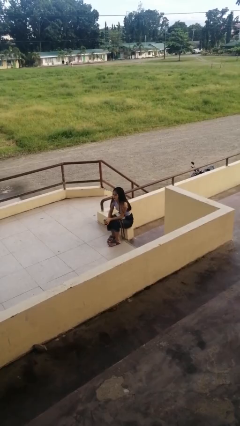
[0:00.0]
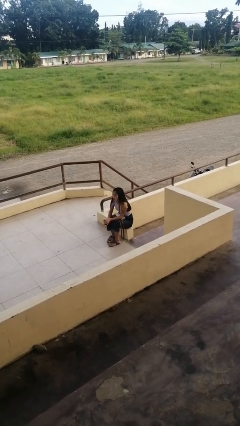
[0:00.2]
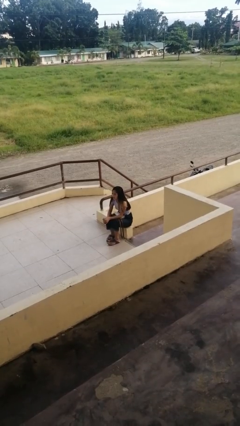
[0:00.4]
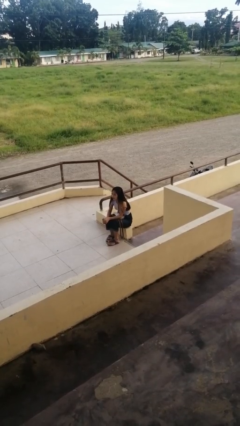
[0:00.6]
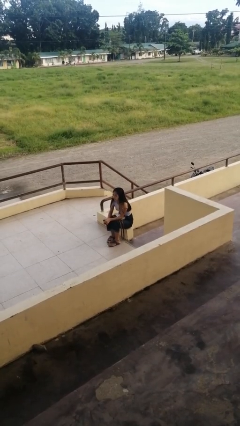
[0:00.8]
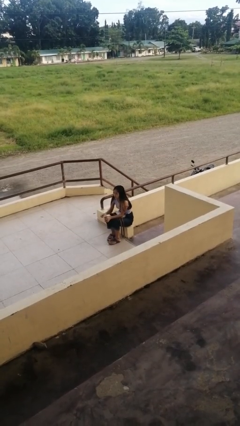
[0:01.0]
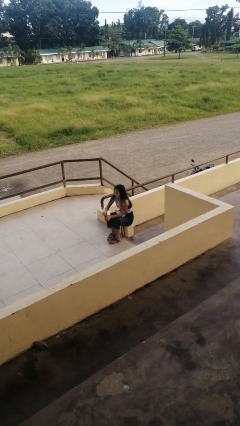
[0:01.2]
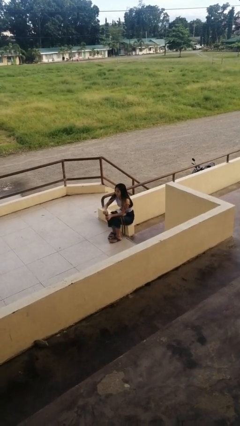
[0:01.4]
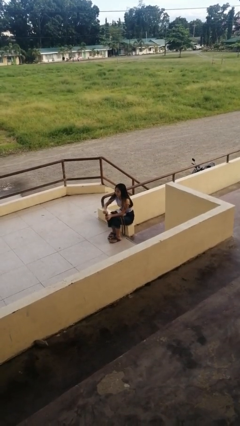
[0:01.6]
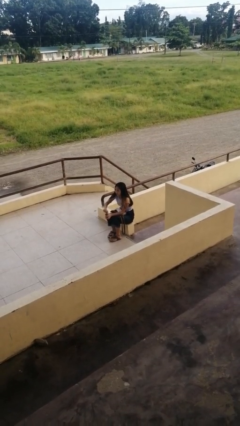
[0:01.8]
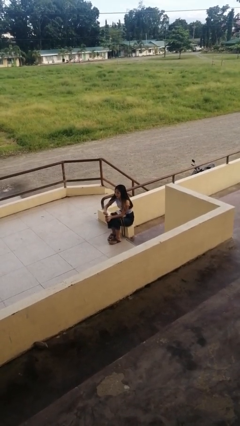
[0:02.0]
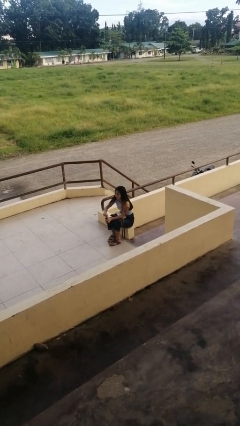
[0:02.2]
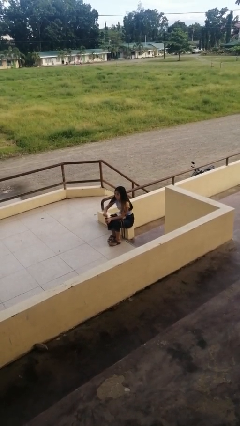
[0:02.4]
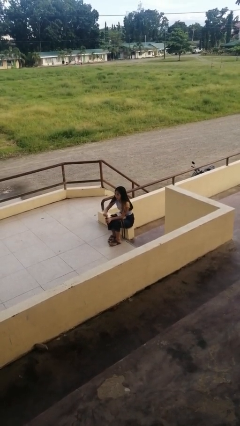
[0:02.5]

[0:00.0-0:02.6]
person opens beverage can

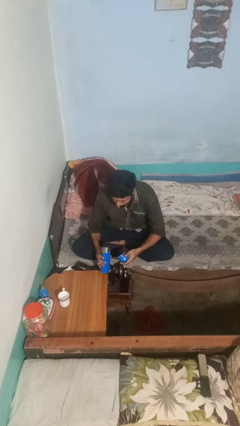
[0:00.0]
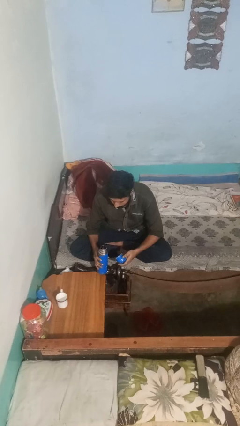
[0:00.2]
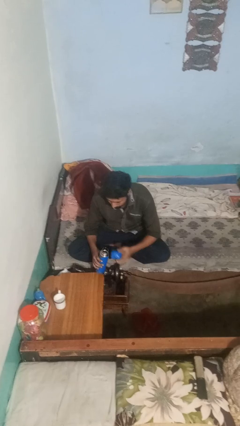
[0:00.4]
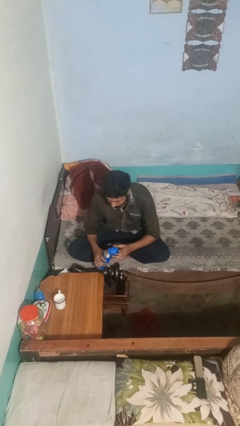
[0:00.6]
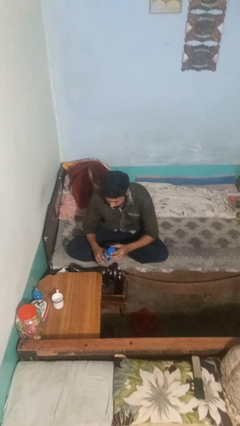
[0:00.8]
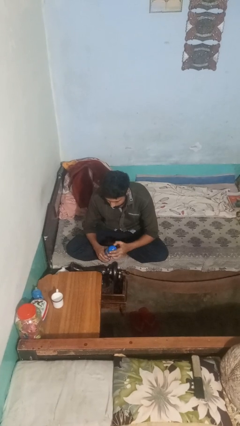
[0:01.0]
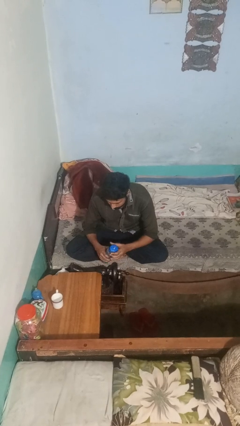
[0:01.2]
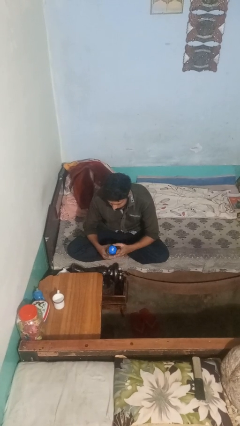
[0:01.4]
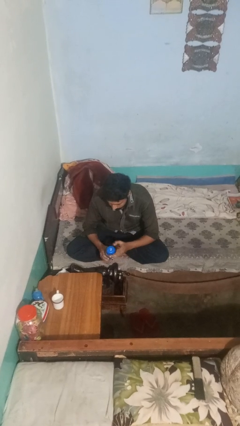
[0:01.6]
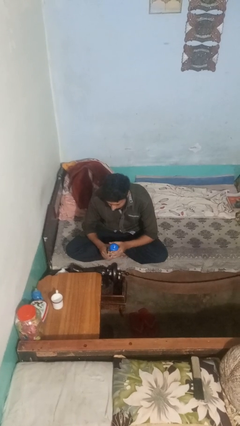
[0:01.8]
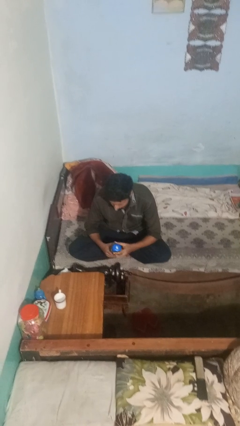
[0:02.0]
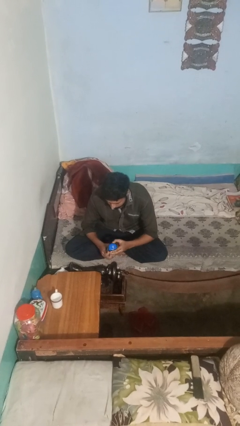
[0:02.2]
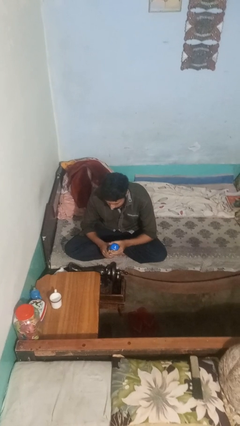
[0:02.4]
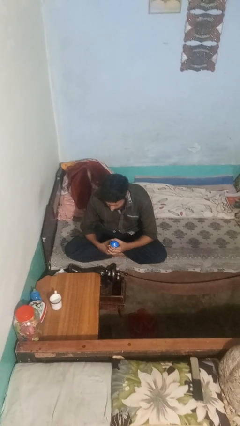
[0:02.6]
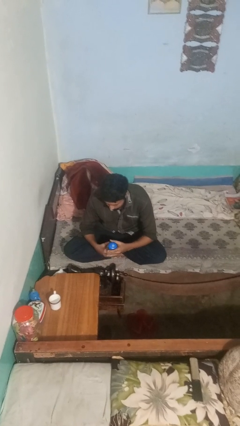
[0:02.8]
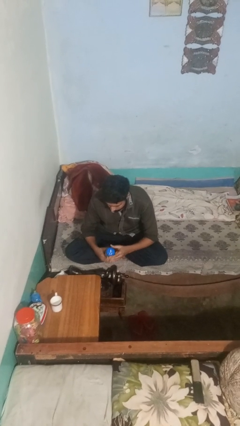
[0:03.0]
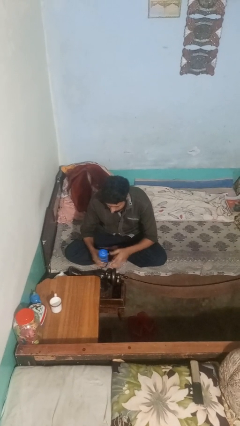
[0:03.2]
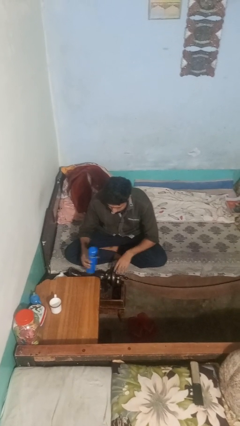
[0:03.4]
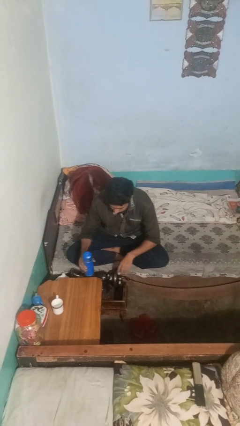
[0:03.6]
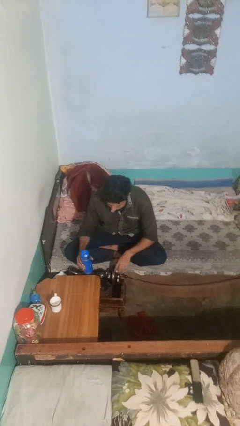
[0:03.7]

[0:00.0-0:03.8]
person screws lid to bottle

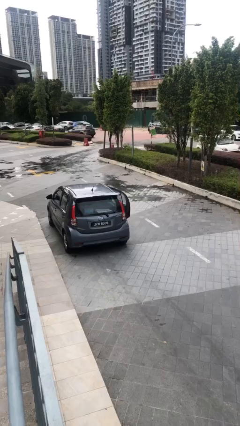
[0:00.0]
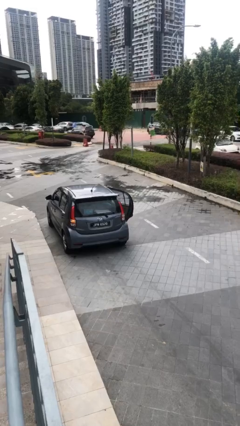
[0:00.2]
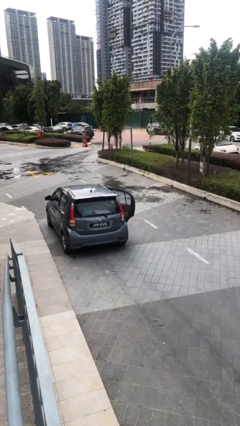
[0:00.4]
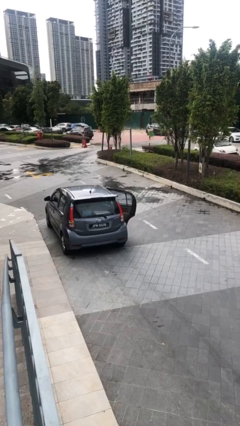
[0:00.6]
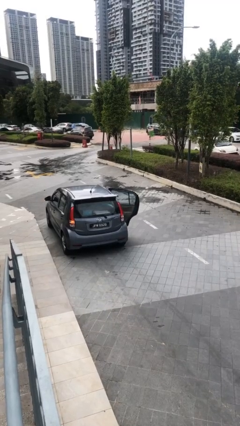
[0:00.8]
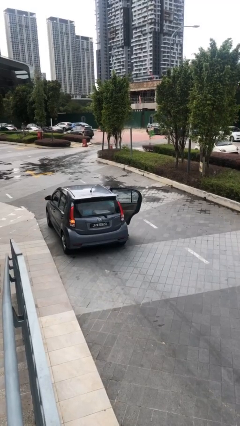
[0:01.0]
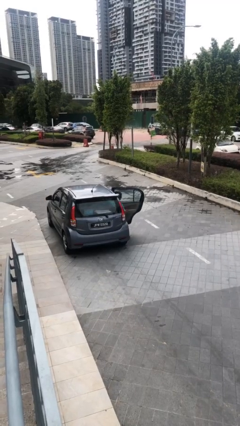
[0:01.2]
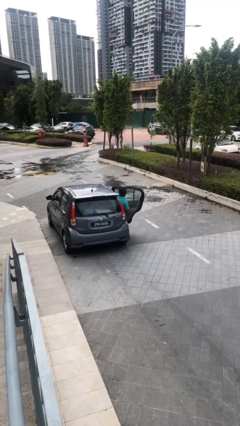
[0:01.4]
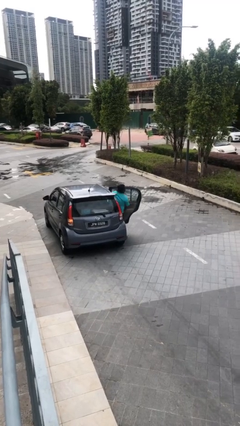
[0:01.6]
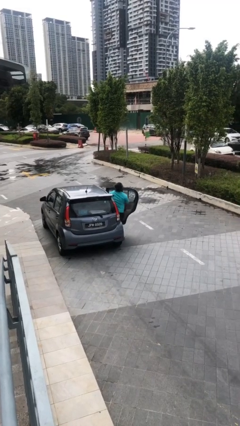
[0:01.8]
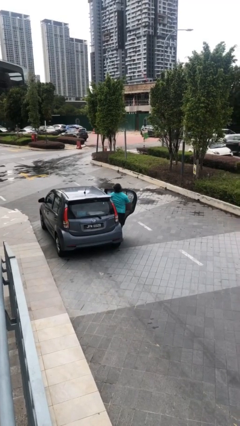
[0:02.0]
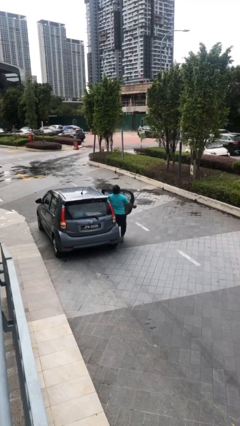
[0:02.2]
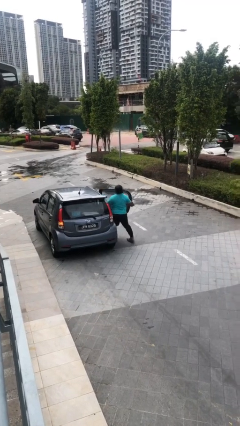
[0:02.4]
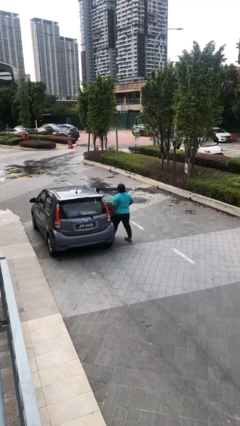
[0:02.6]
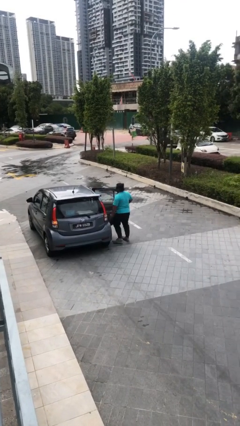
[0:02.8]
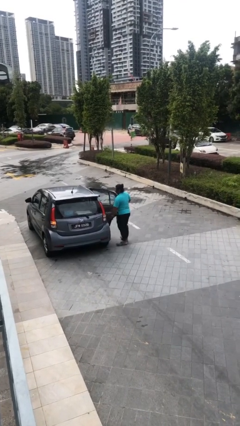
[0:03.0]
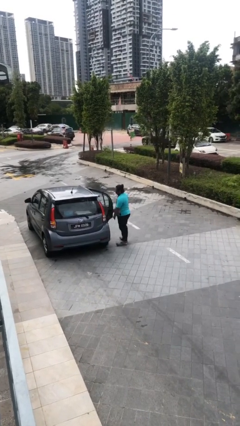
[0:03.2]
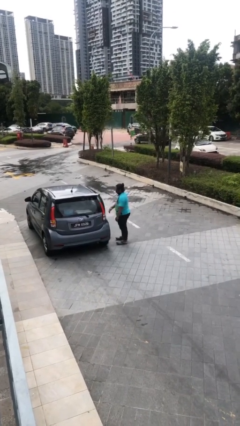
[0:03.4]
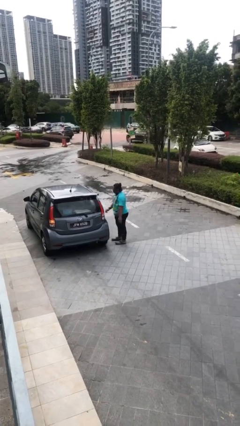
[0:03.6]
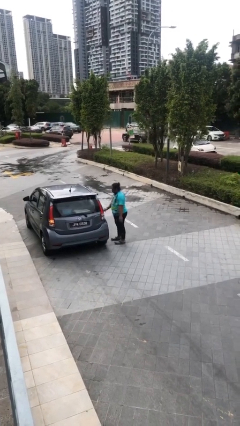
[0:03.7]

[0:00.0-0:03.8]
car drops off person

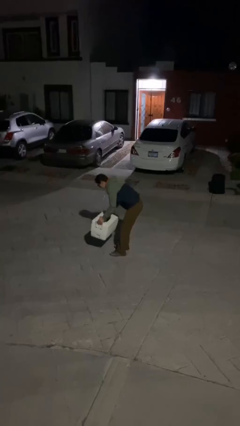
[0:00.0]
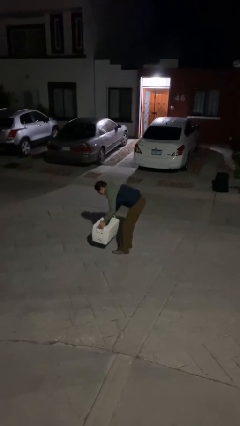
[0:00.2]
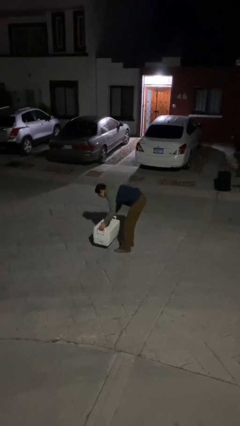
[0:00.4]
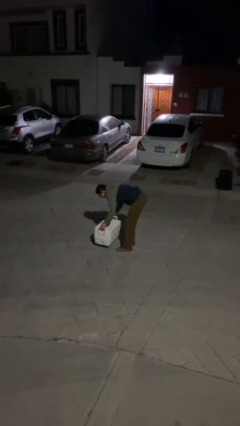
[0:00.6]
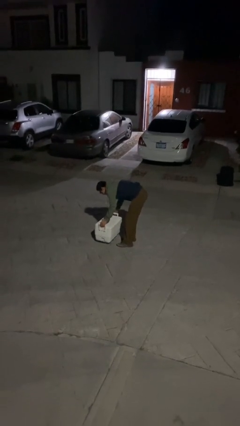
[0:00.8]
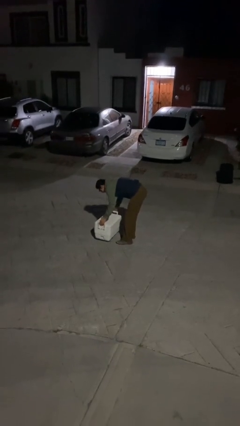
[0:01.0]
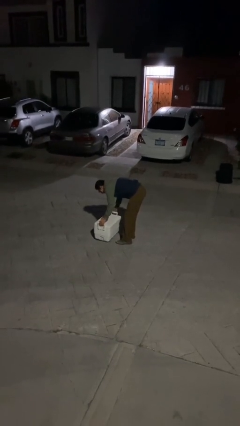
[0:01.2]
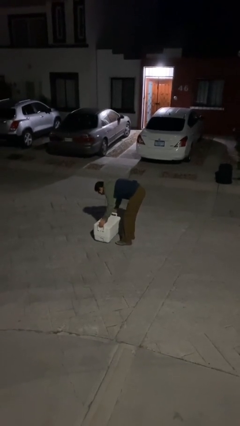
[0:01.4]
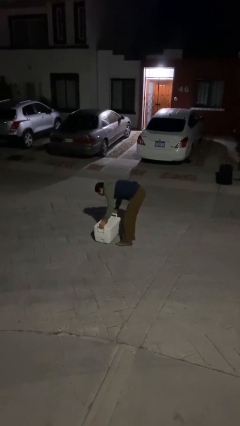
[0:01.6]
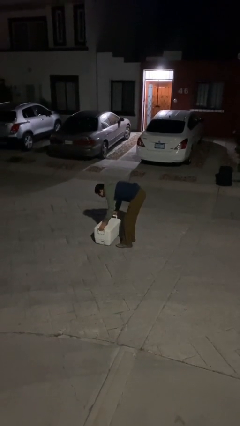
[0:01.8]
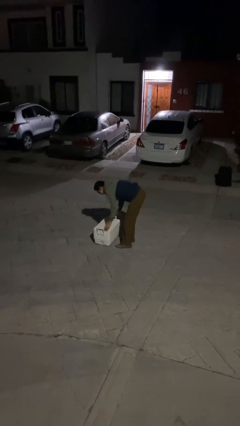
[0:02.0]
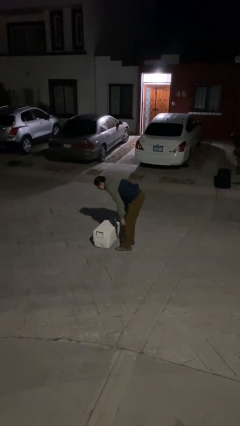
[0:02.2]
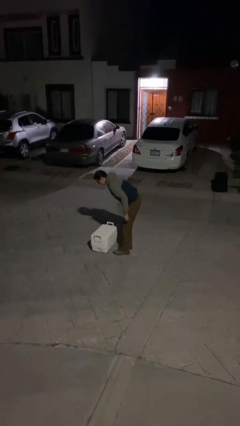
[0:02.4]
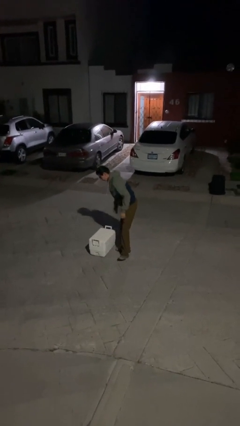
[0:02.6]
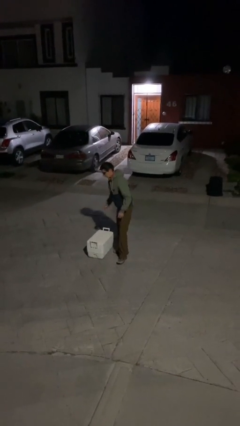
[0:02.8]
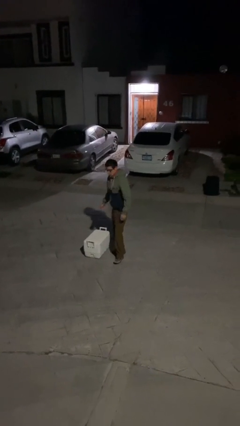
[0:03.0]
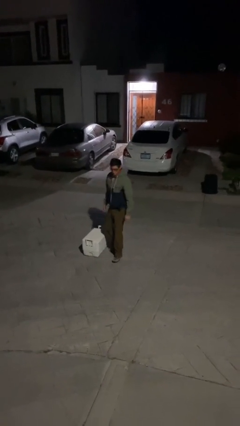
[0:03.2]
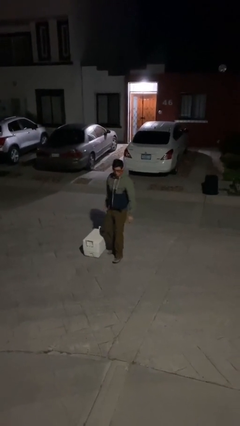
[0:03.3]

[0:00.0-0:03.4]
person puts down object on floor

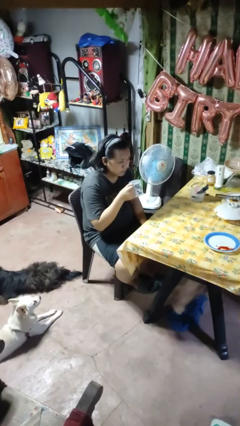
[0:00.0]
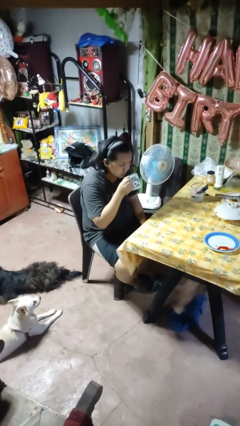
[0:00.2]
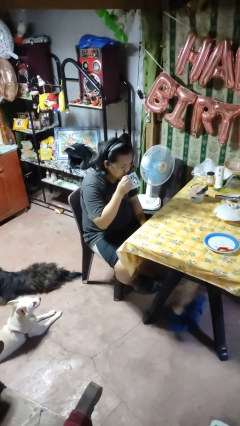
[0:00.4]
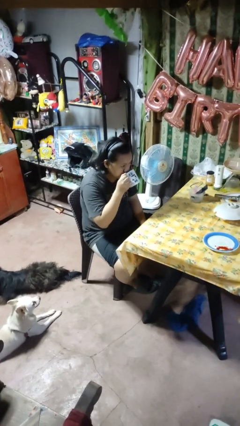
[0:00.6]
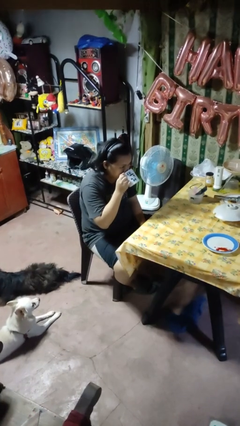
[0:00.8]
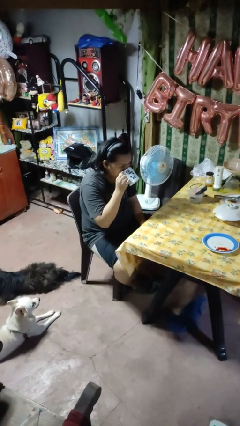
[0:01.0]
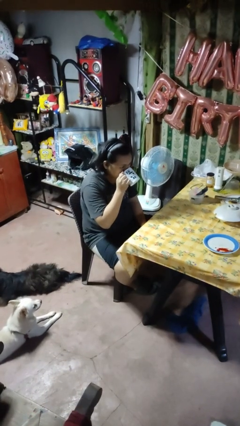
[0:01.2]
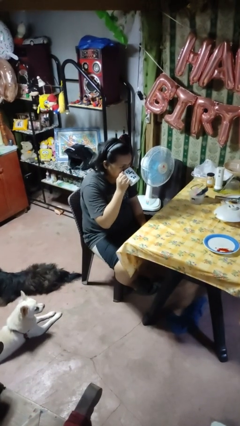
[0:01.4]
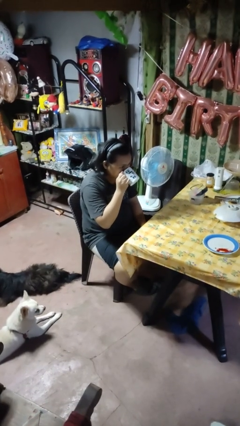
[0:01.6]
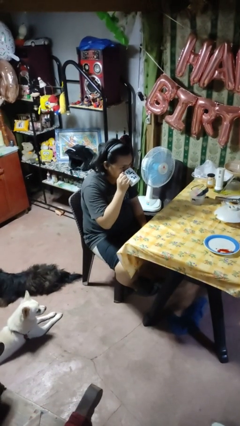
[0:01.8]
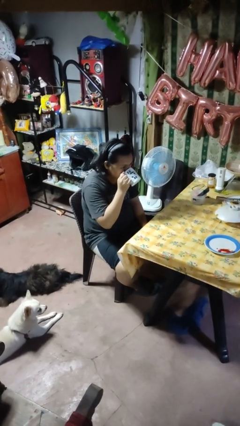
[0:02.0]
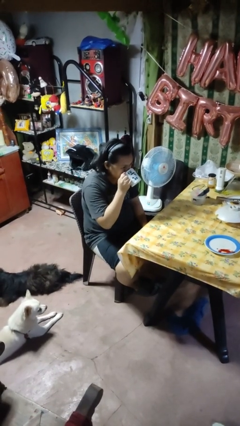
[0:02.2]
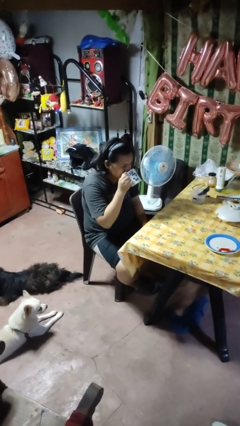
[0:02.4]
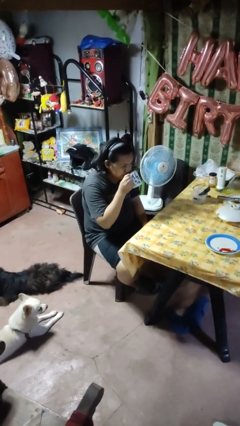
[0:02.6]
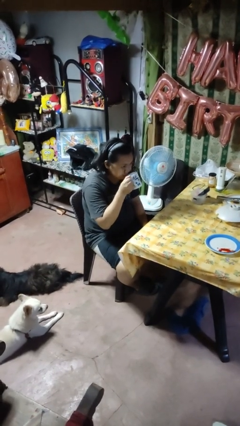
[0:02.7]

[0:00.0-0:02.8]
person drinks from mug

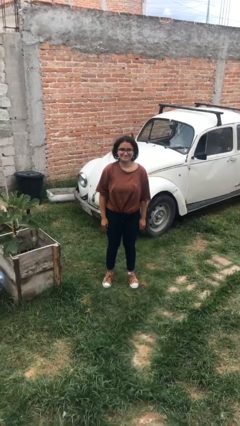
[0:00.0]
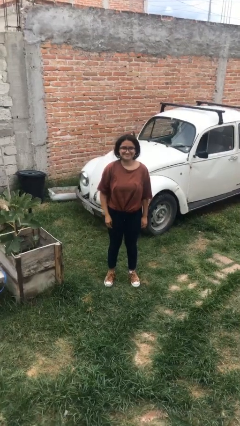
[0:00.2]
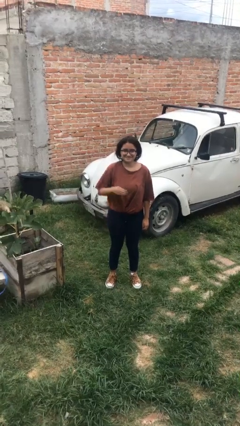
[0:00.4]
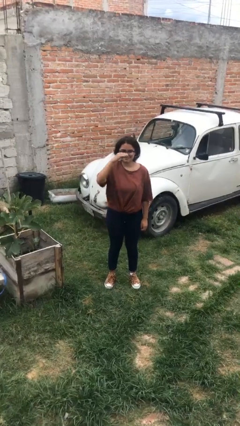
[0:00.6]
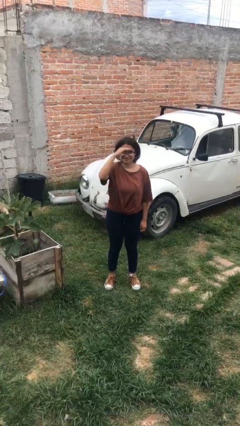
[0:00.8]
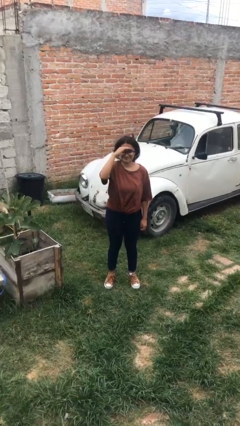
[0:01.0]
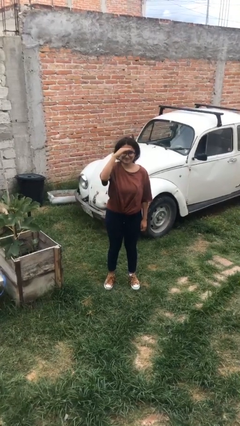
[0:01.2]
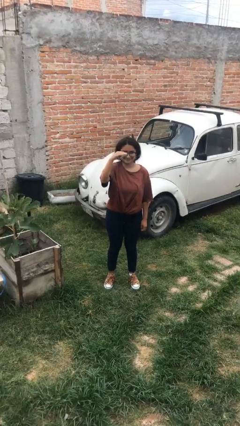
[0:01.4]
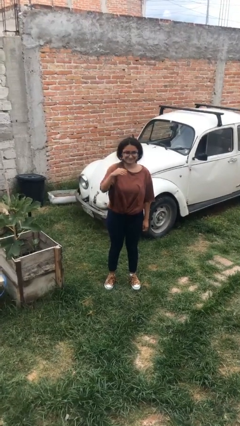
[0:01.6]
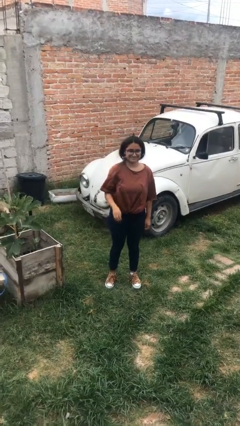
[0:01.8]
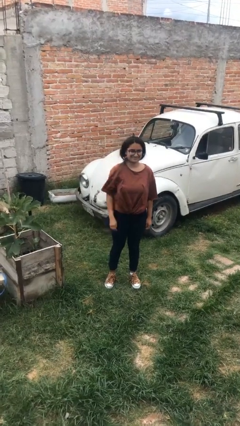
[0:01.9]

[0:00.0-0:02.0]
person salutes
